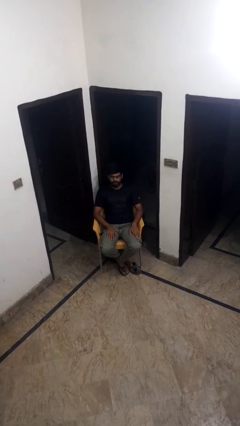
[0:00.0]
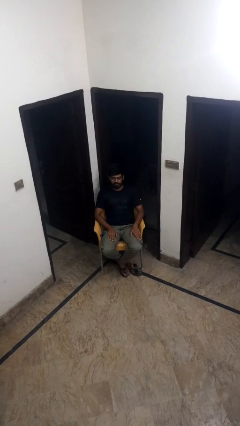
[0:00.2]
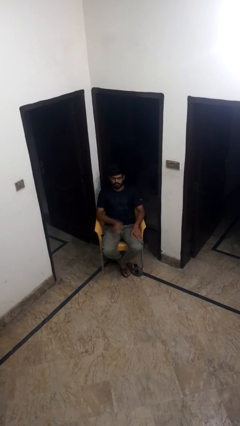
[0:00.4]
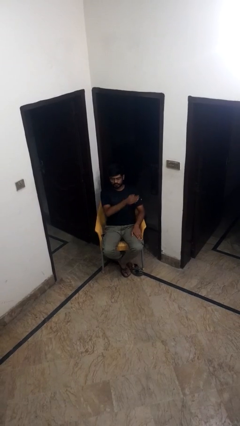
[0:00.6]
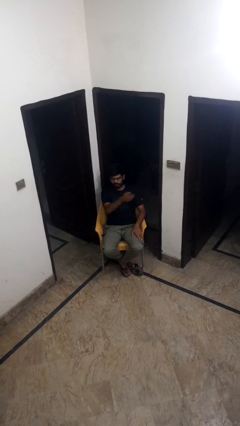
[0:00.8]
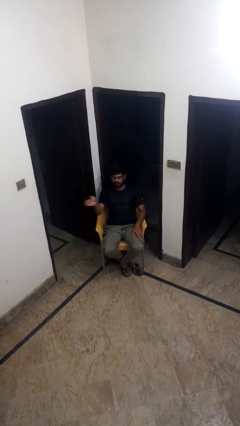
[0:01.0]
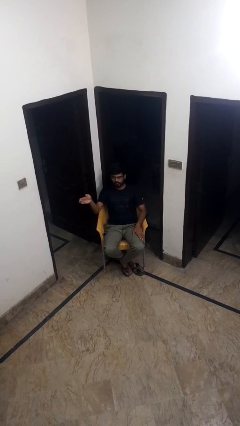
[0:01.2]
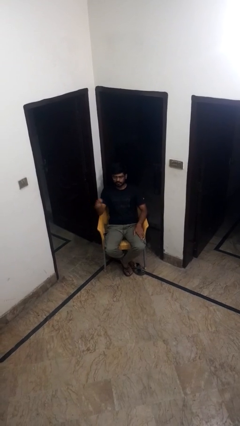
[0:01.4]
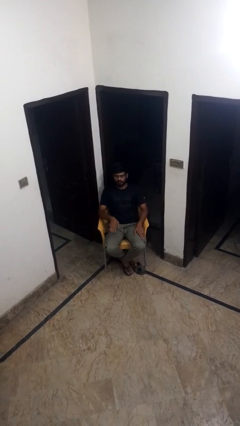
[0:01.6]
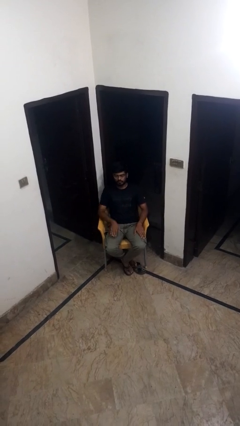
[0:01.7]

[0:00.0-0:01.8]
person gestures swipe right

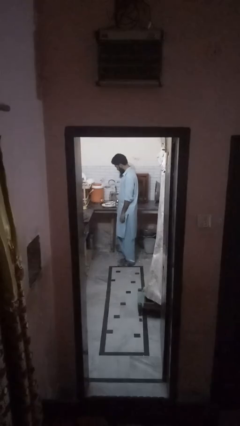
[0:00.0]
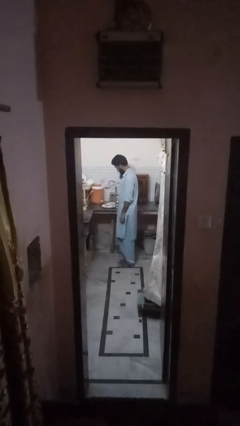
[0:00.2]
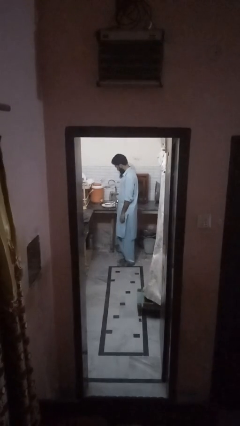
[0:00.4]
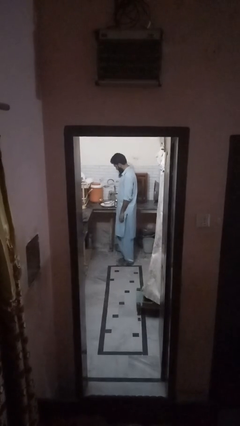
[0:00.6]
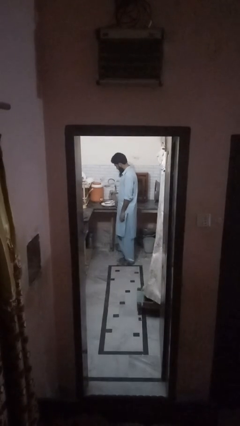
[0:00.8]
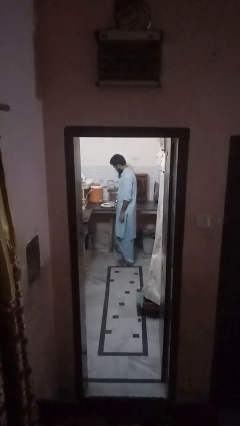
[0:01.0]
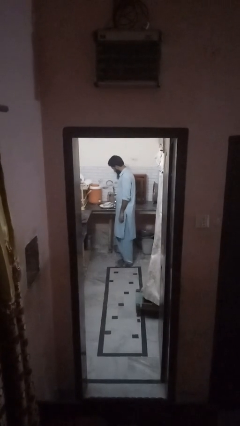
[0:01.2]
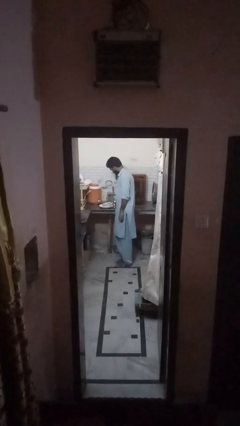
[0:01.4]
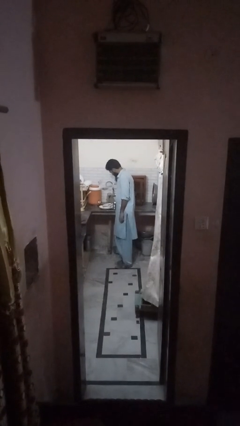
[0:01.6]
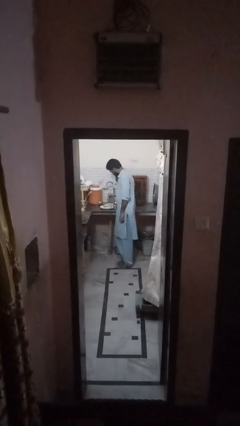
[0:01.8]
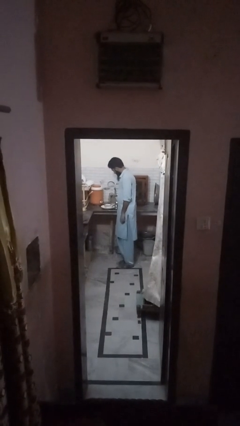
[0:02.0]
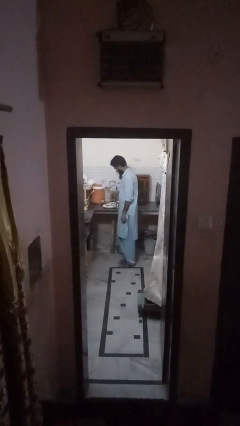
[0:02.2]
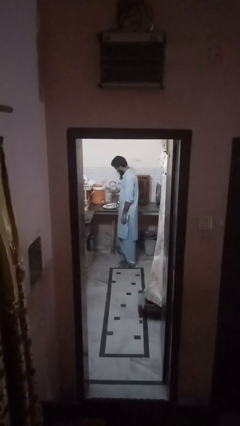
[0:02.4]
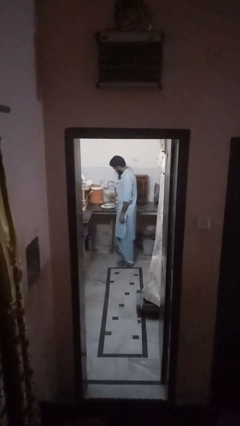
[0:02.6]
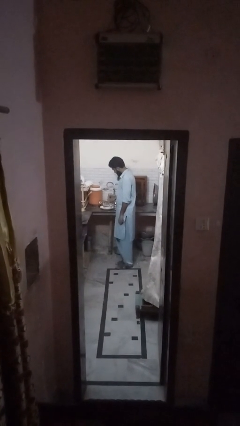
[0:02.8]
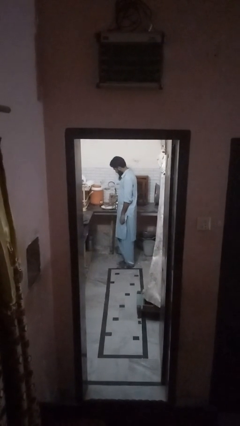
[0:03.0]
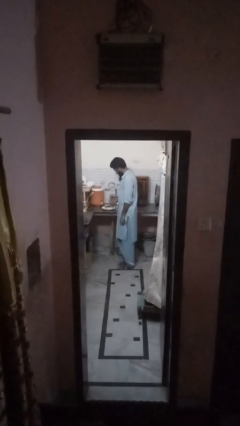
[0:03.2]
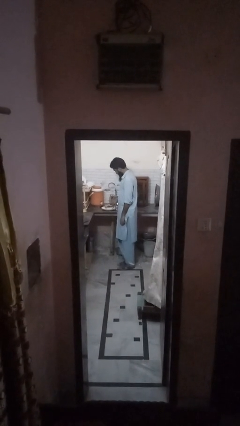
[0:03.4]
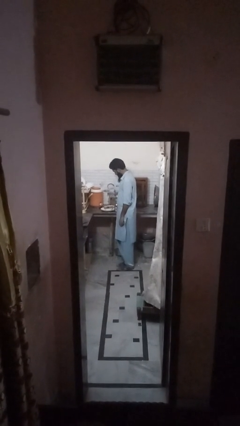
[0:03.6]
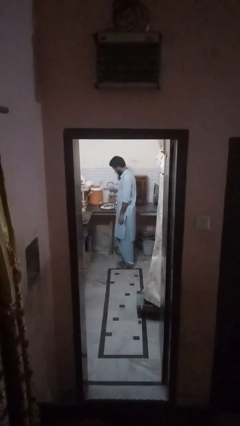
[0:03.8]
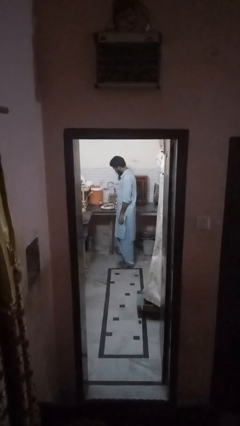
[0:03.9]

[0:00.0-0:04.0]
person unloads dishwasher

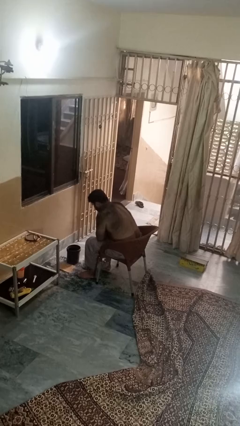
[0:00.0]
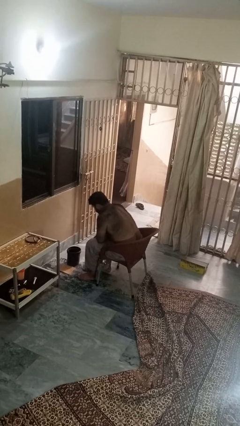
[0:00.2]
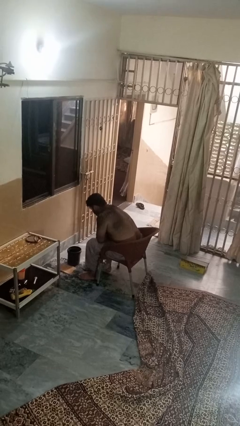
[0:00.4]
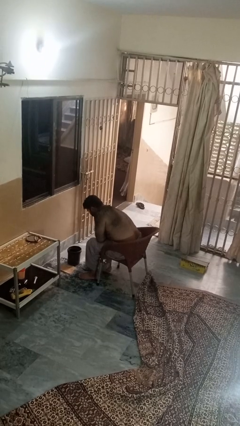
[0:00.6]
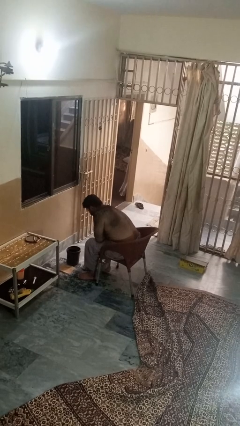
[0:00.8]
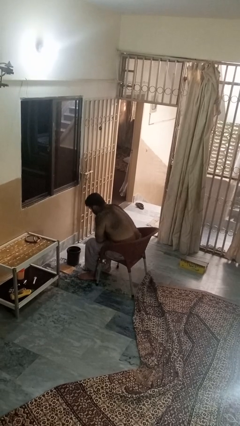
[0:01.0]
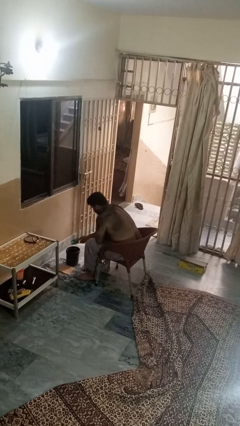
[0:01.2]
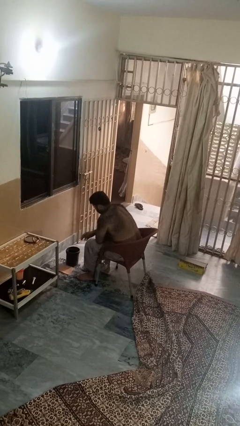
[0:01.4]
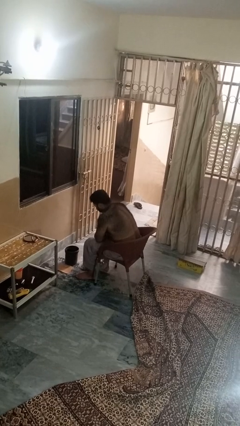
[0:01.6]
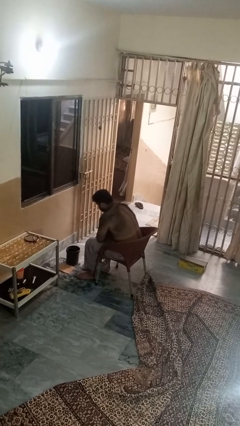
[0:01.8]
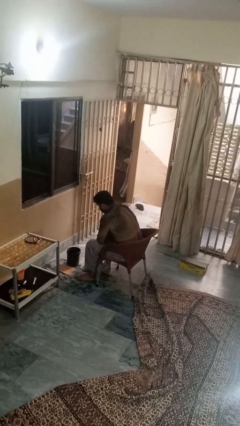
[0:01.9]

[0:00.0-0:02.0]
person discards trash

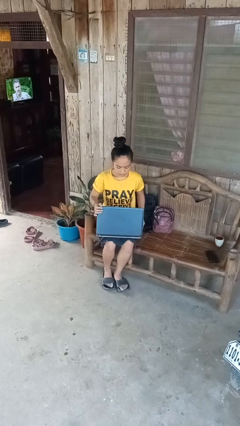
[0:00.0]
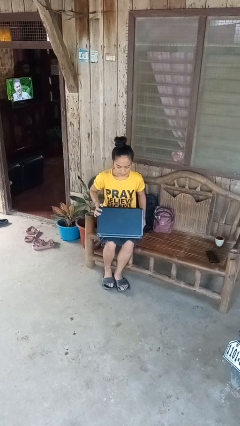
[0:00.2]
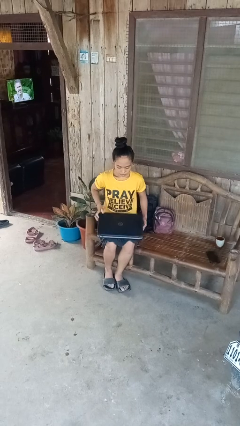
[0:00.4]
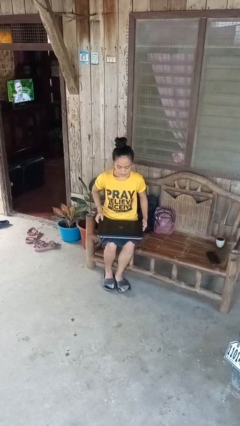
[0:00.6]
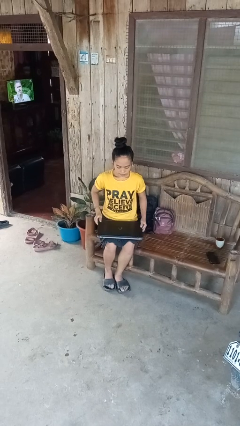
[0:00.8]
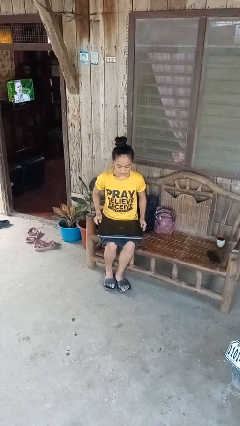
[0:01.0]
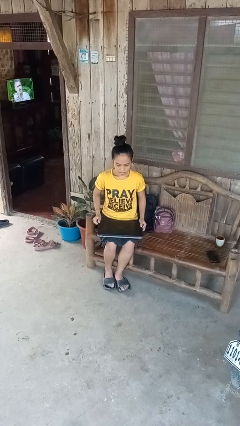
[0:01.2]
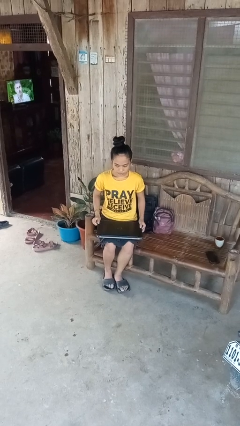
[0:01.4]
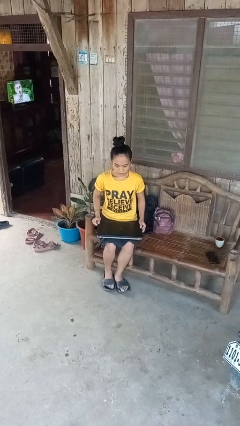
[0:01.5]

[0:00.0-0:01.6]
person closes laptop

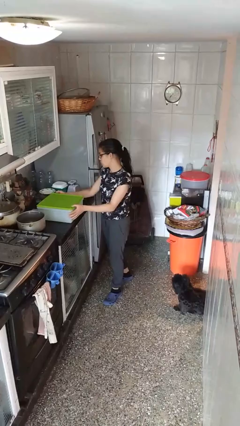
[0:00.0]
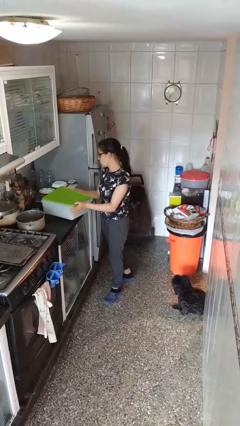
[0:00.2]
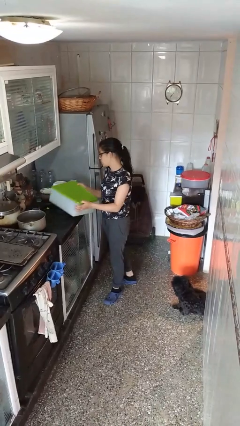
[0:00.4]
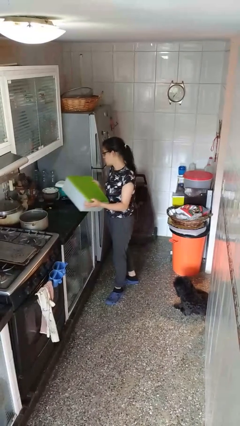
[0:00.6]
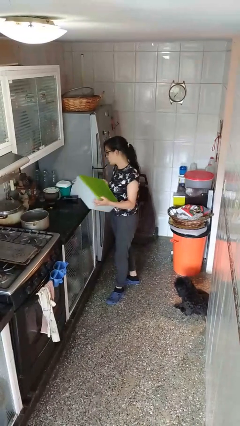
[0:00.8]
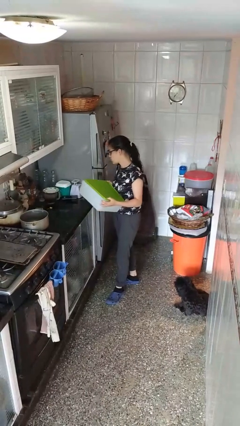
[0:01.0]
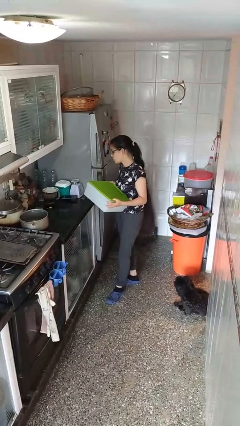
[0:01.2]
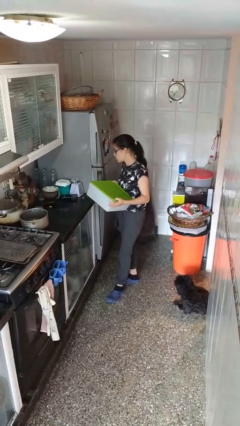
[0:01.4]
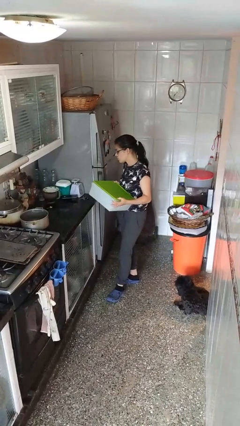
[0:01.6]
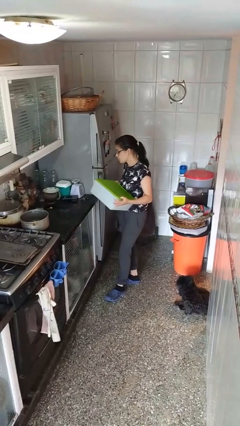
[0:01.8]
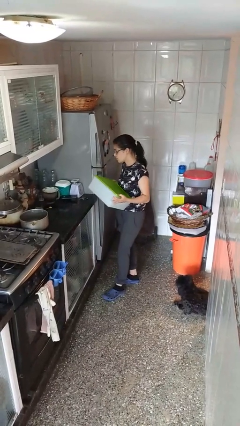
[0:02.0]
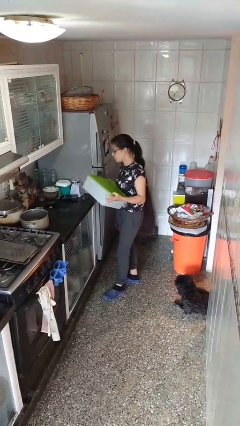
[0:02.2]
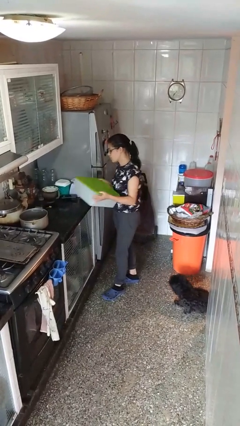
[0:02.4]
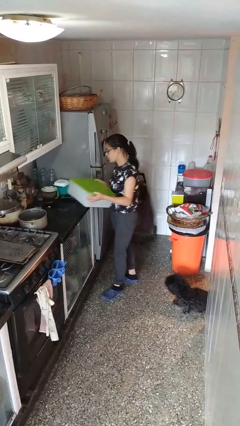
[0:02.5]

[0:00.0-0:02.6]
person picks up object from countertop

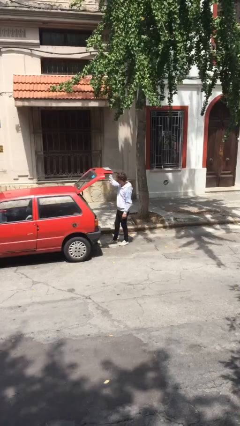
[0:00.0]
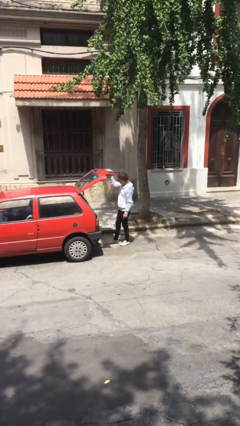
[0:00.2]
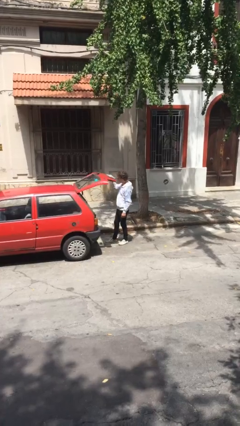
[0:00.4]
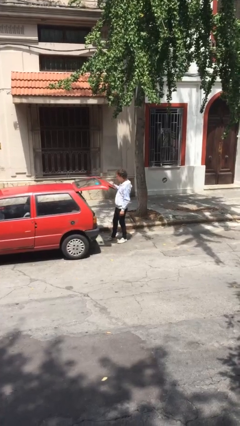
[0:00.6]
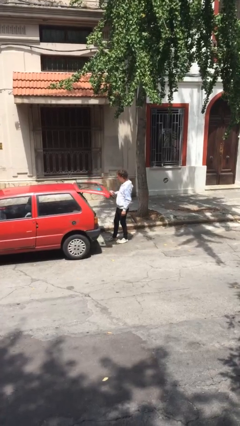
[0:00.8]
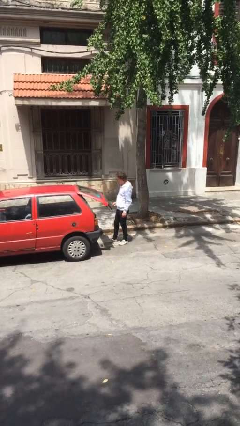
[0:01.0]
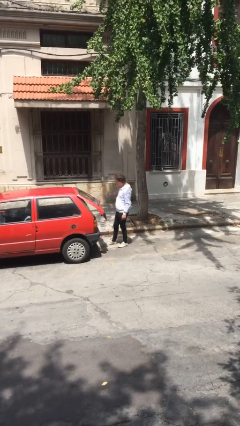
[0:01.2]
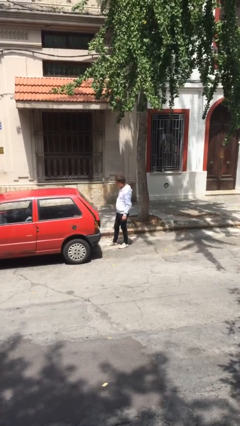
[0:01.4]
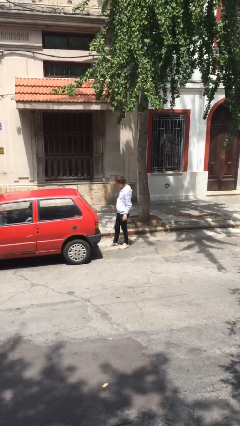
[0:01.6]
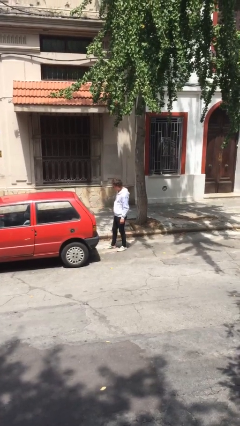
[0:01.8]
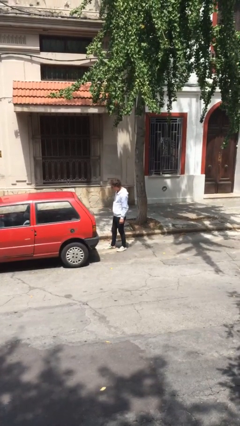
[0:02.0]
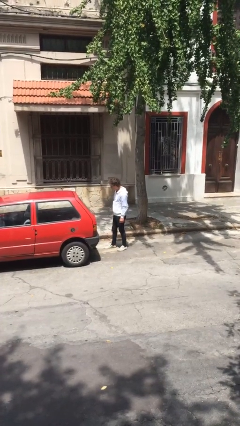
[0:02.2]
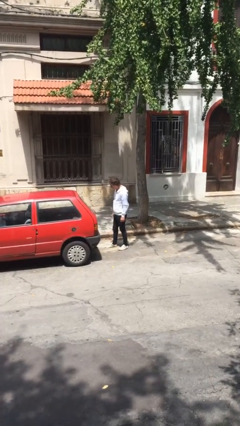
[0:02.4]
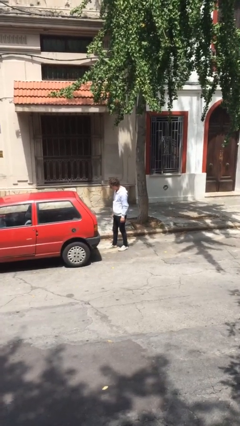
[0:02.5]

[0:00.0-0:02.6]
person closes car trunk

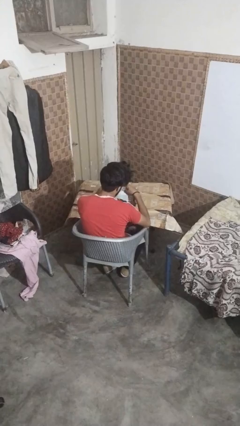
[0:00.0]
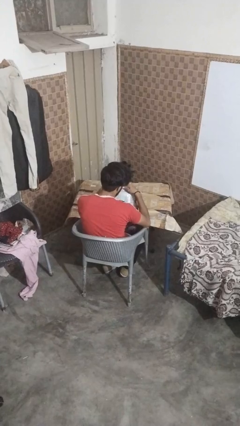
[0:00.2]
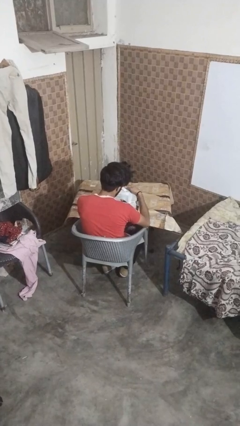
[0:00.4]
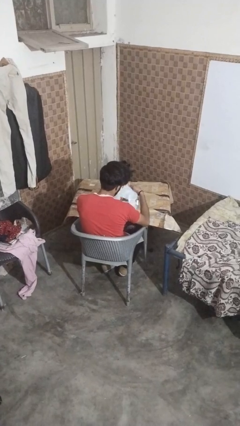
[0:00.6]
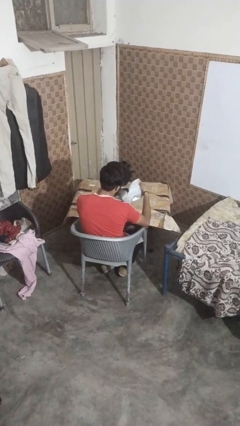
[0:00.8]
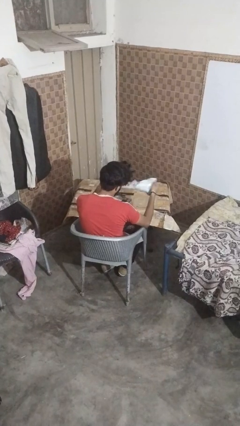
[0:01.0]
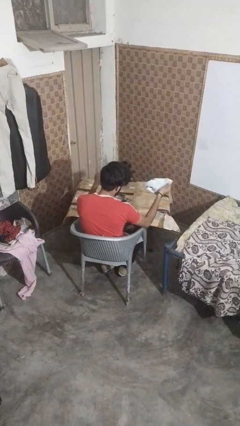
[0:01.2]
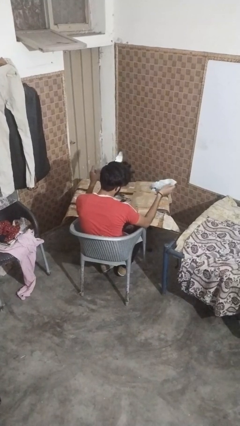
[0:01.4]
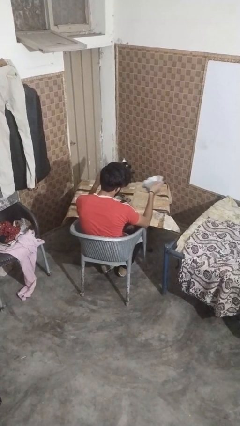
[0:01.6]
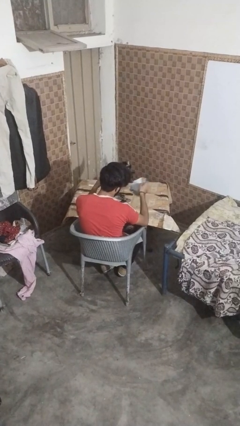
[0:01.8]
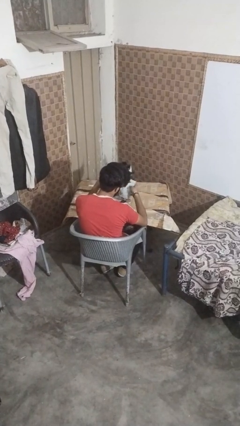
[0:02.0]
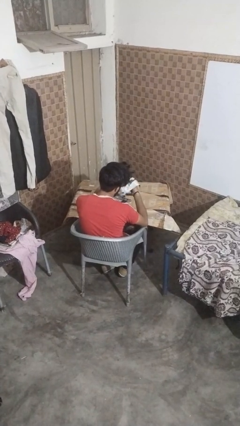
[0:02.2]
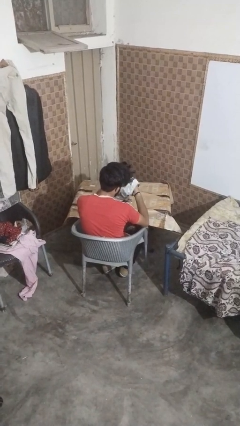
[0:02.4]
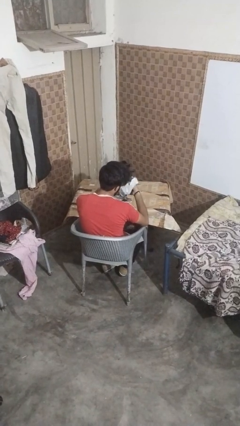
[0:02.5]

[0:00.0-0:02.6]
person tears paper
